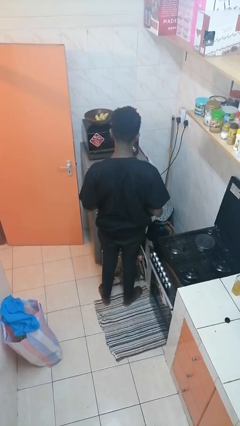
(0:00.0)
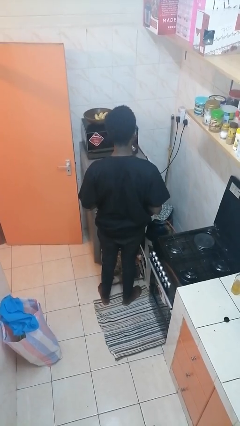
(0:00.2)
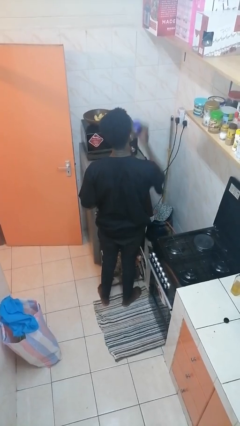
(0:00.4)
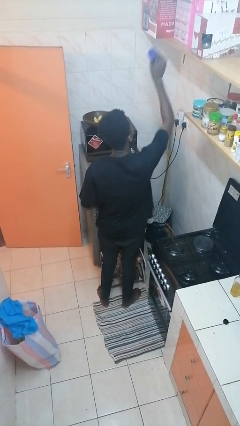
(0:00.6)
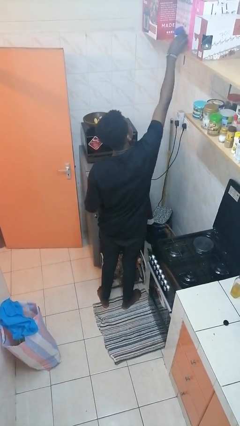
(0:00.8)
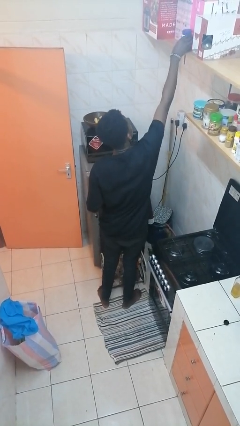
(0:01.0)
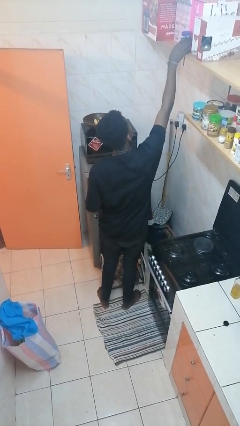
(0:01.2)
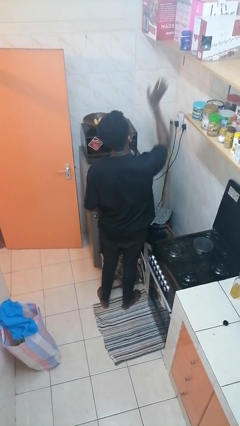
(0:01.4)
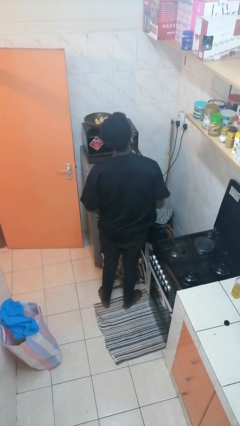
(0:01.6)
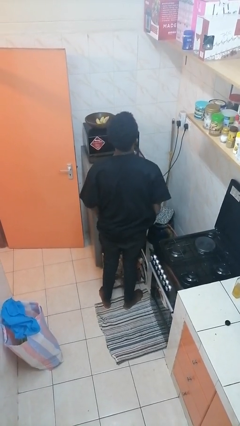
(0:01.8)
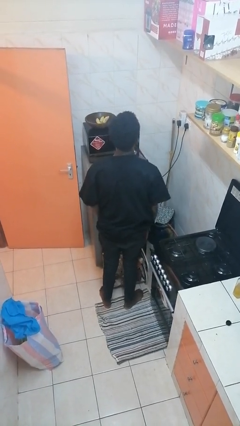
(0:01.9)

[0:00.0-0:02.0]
person puts down object on shelf

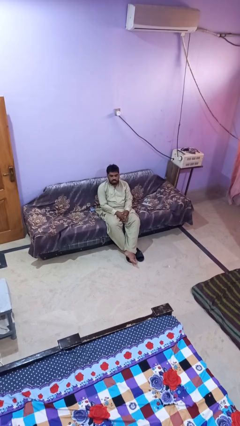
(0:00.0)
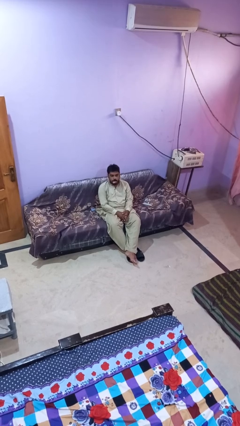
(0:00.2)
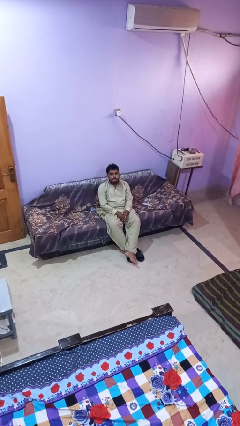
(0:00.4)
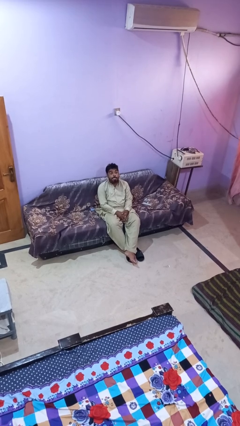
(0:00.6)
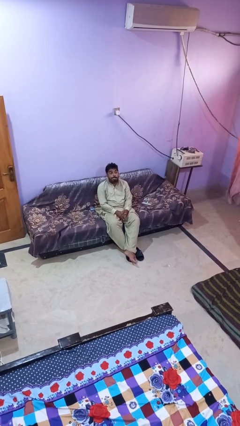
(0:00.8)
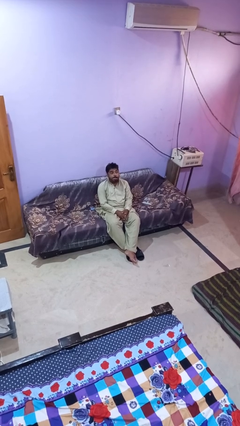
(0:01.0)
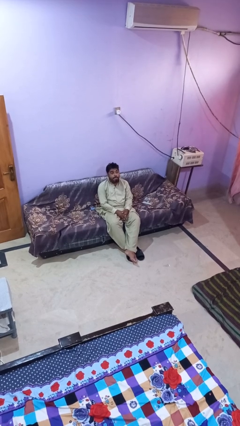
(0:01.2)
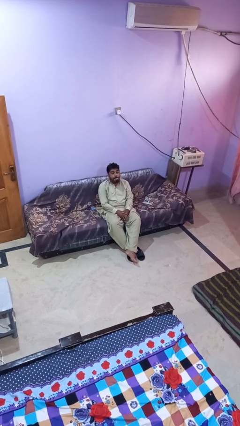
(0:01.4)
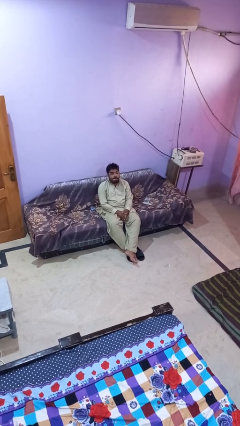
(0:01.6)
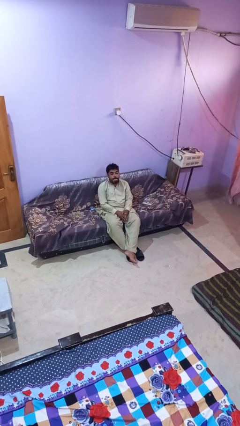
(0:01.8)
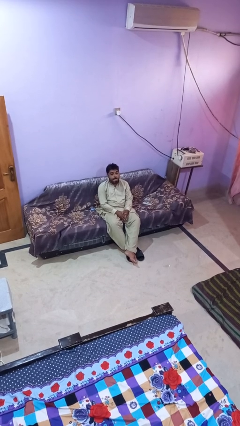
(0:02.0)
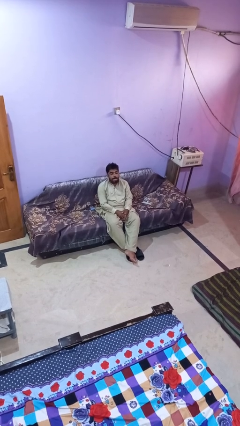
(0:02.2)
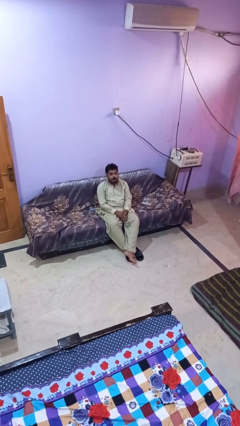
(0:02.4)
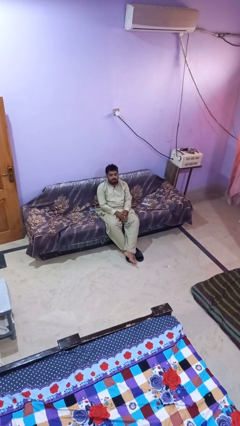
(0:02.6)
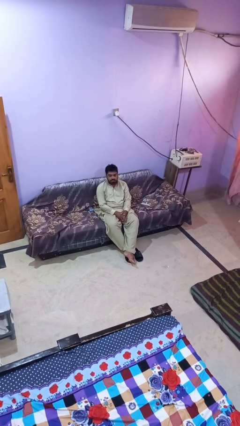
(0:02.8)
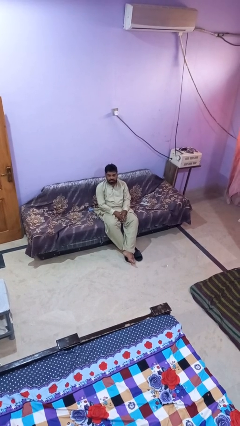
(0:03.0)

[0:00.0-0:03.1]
person sticks out tongue

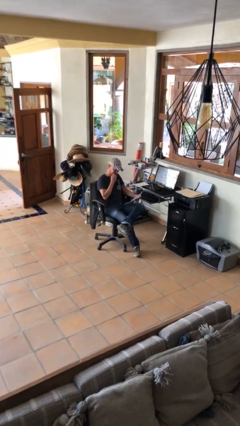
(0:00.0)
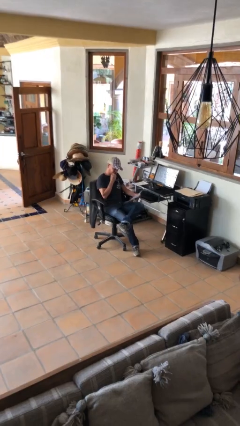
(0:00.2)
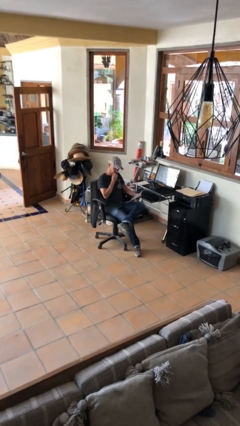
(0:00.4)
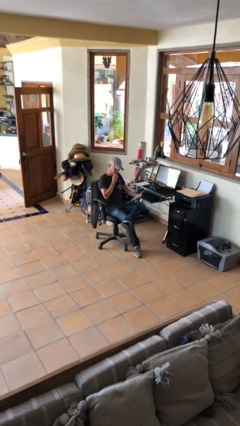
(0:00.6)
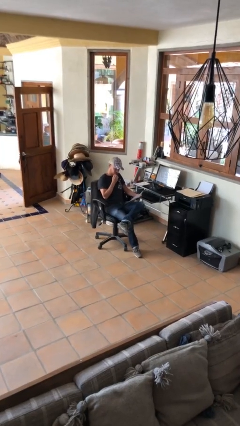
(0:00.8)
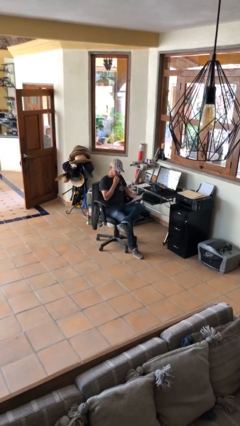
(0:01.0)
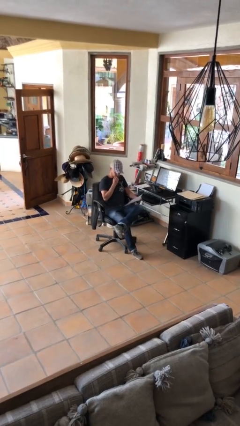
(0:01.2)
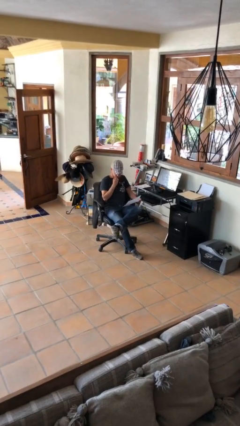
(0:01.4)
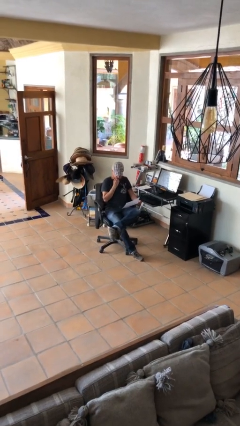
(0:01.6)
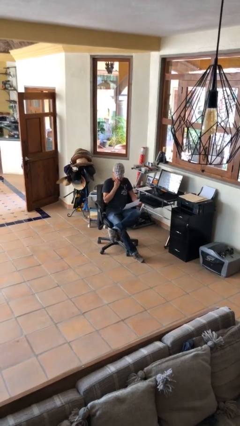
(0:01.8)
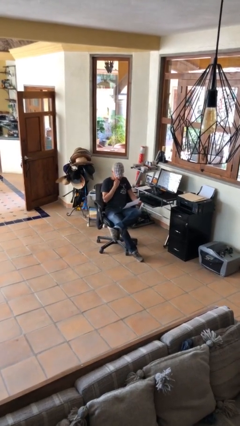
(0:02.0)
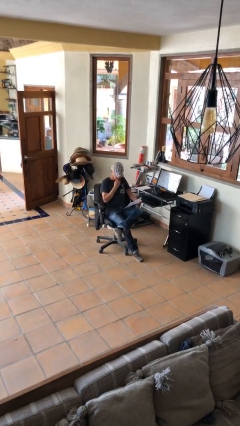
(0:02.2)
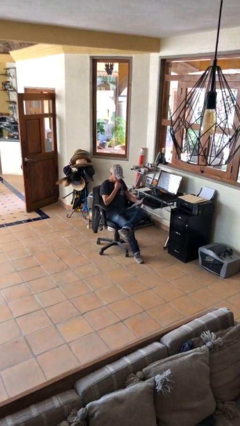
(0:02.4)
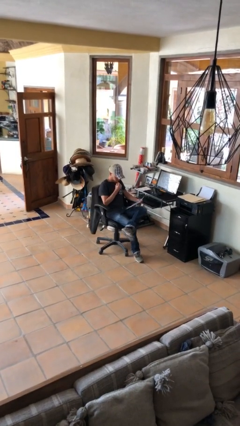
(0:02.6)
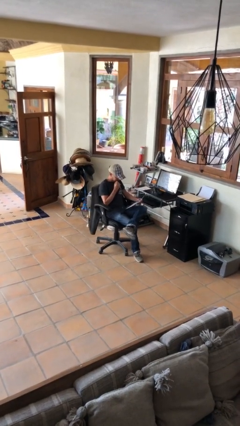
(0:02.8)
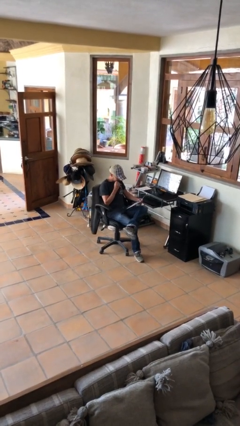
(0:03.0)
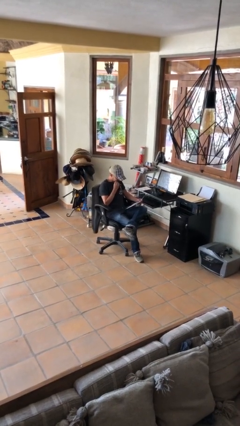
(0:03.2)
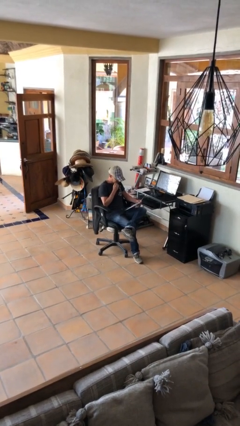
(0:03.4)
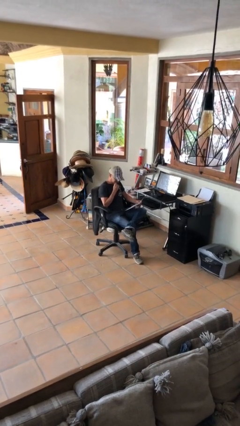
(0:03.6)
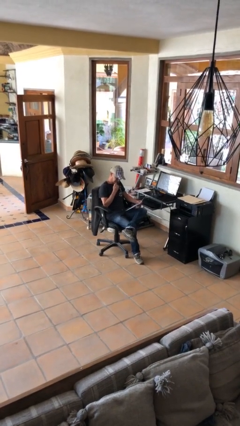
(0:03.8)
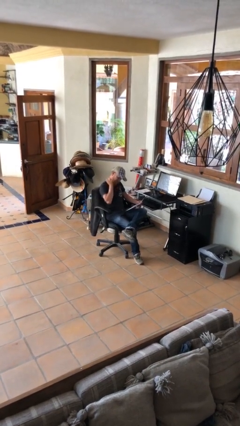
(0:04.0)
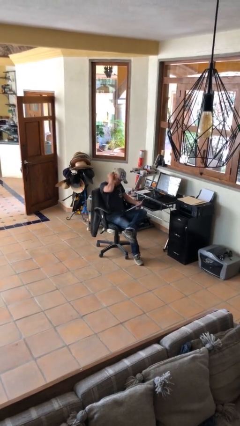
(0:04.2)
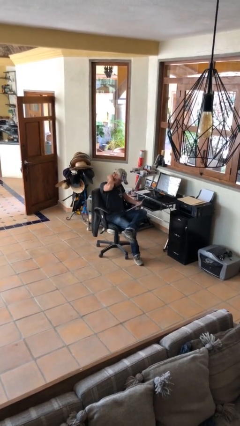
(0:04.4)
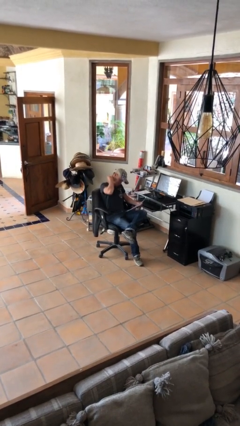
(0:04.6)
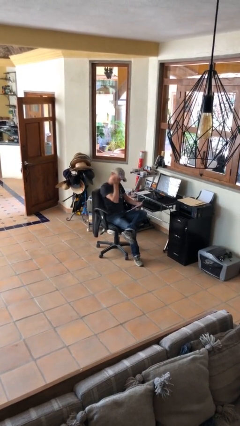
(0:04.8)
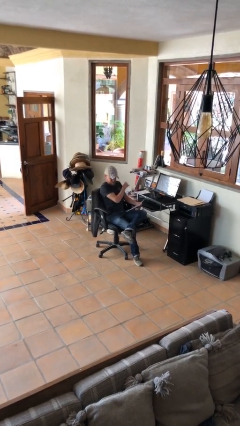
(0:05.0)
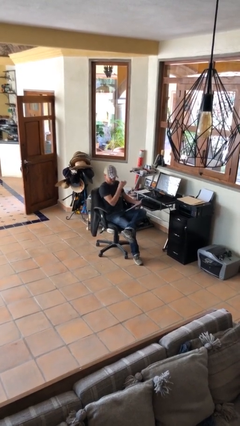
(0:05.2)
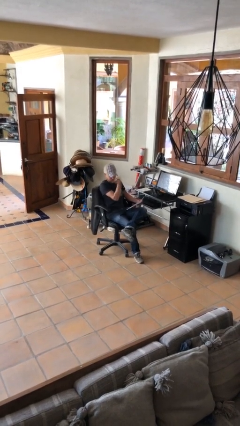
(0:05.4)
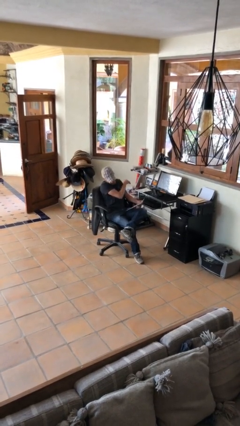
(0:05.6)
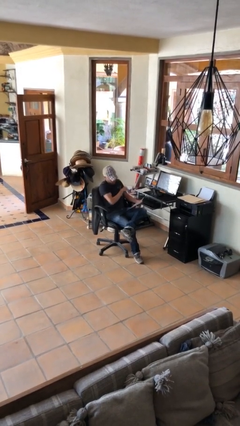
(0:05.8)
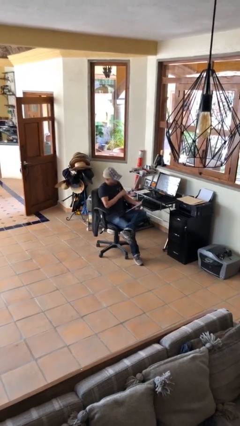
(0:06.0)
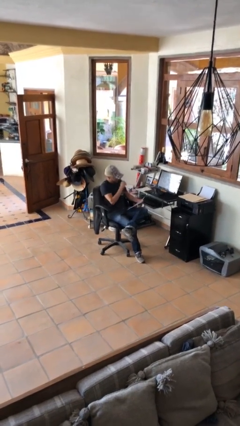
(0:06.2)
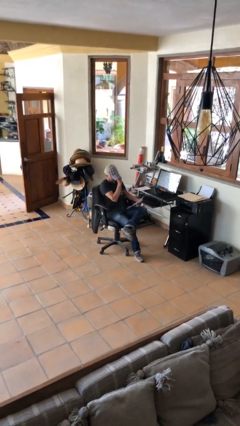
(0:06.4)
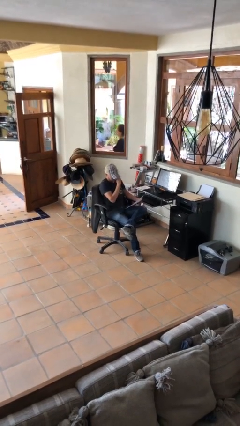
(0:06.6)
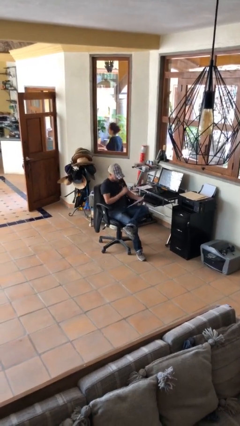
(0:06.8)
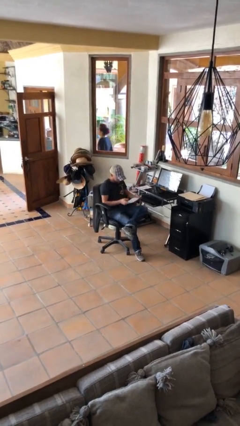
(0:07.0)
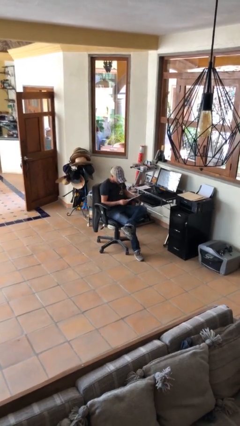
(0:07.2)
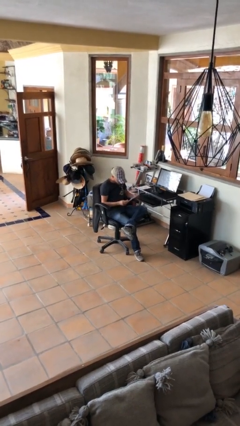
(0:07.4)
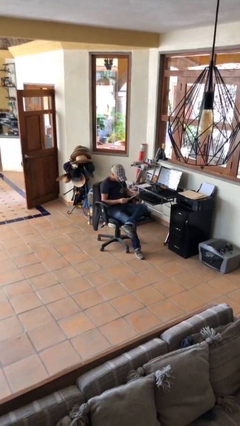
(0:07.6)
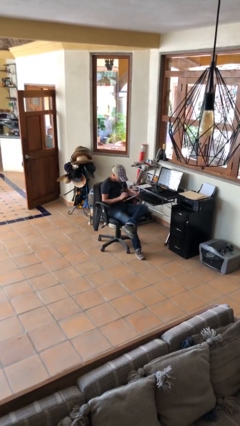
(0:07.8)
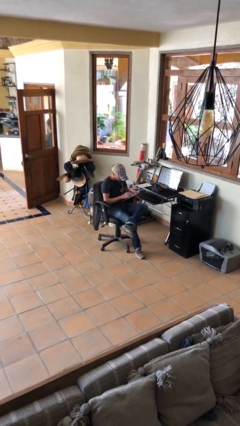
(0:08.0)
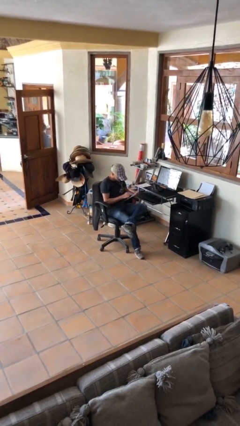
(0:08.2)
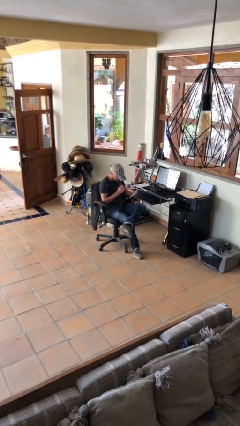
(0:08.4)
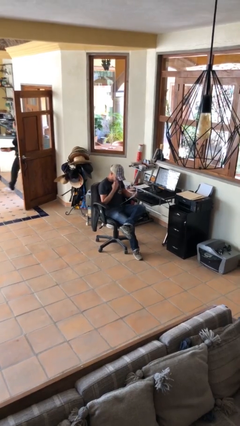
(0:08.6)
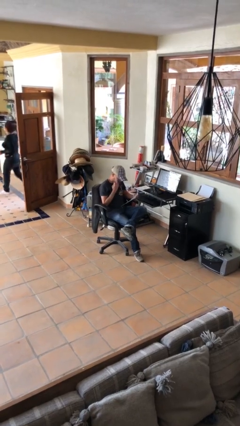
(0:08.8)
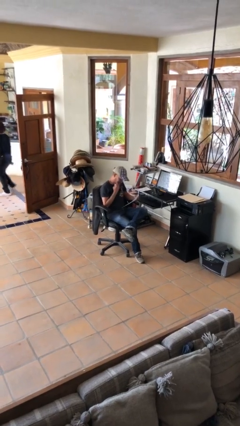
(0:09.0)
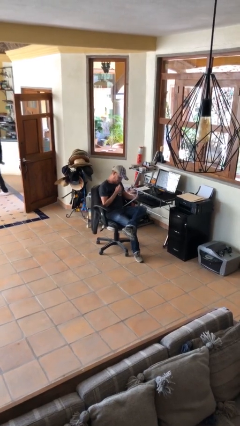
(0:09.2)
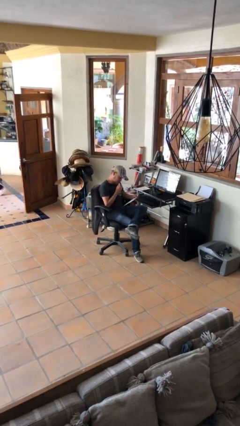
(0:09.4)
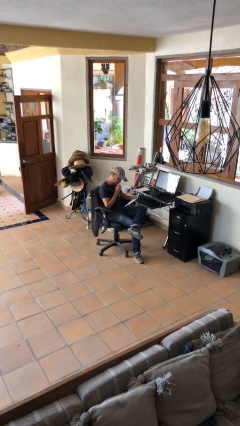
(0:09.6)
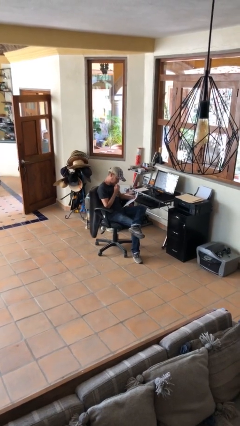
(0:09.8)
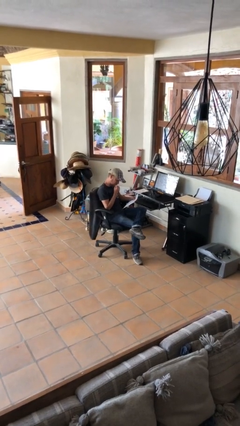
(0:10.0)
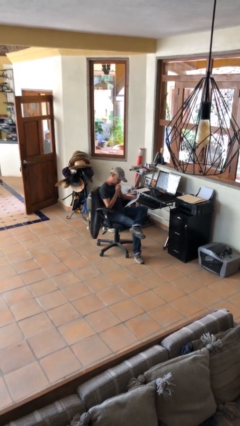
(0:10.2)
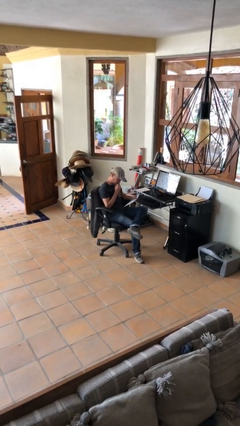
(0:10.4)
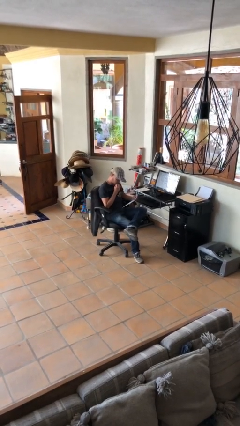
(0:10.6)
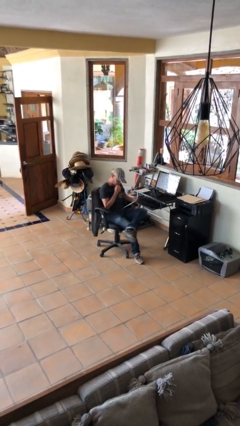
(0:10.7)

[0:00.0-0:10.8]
person reads document

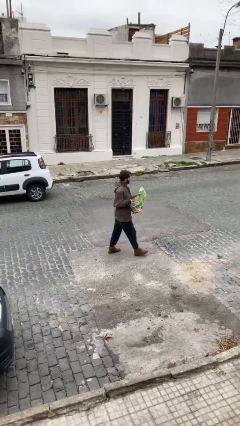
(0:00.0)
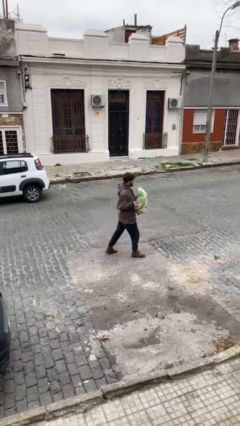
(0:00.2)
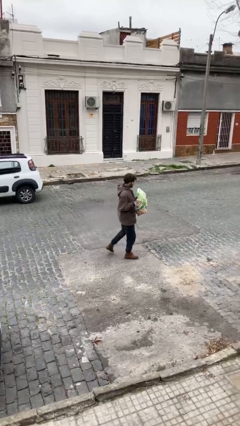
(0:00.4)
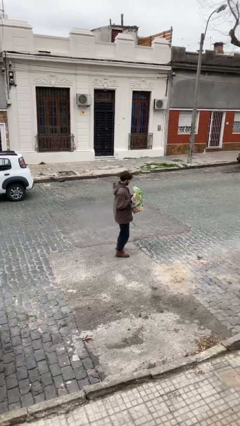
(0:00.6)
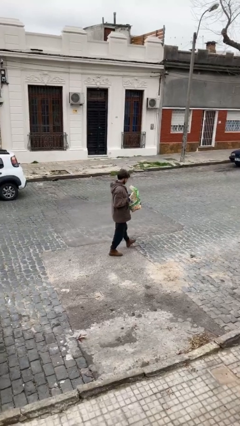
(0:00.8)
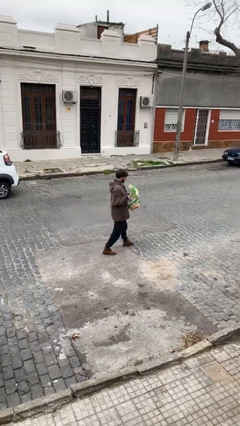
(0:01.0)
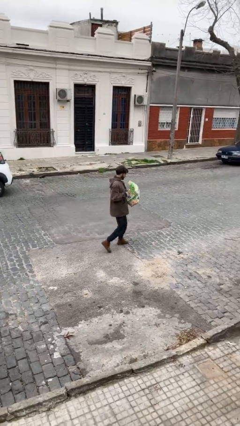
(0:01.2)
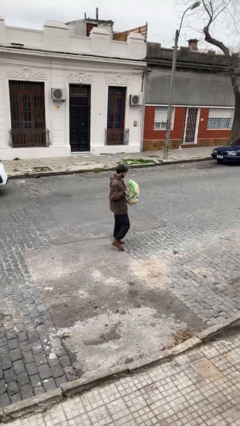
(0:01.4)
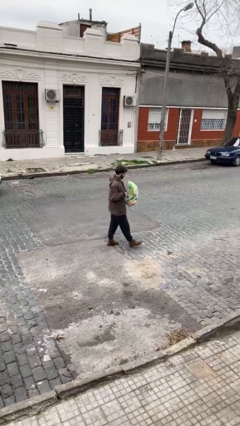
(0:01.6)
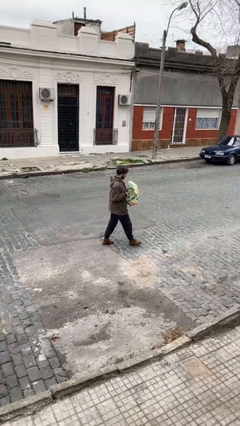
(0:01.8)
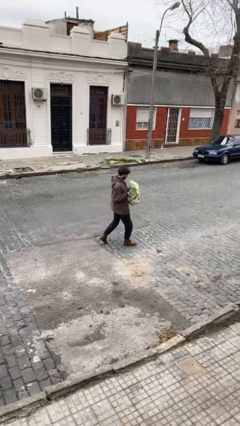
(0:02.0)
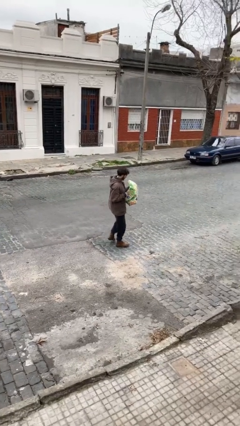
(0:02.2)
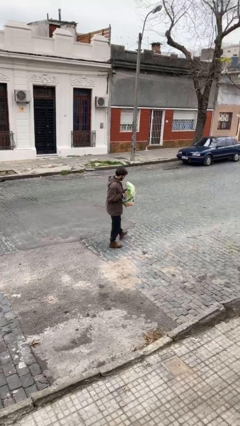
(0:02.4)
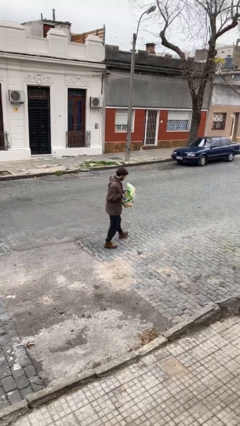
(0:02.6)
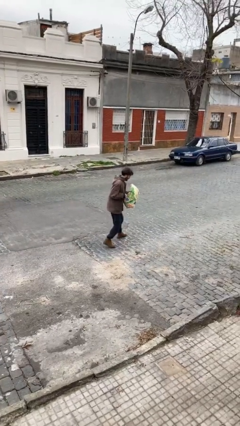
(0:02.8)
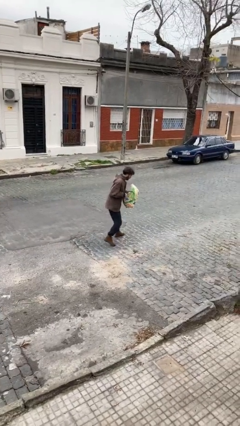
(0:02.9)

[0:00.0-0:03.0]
person carries heavy object
